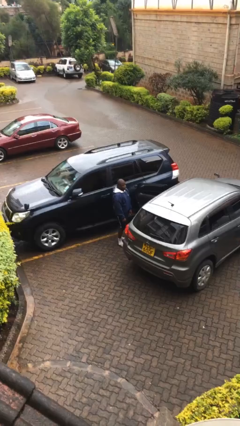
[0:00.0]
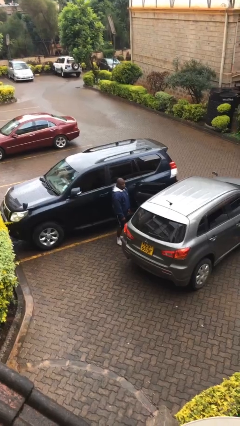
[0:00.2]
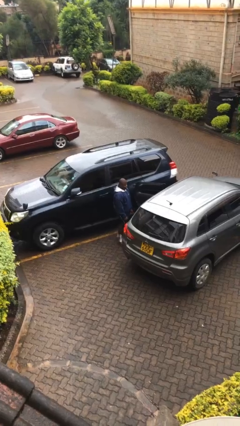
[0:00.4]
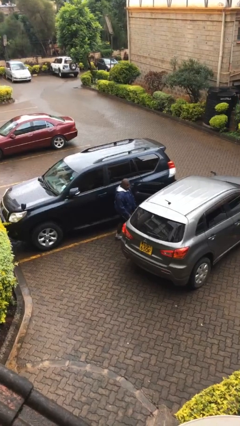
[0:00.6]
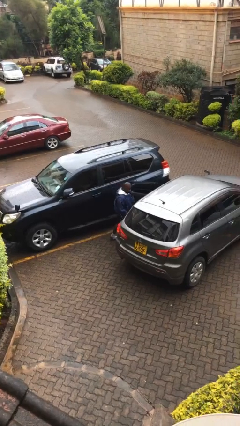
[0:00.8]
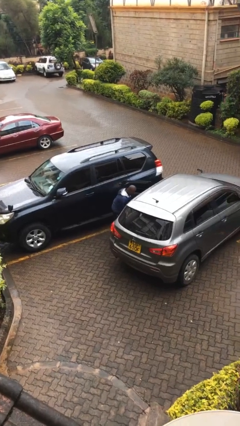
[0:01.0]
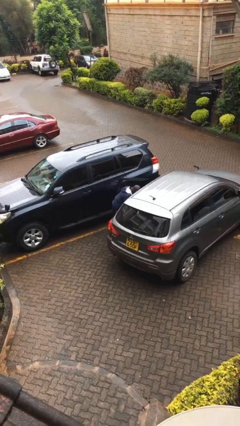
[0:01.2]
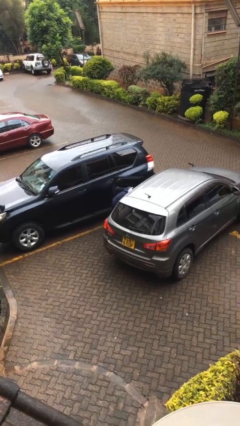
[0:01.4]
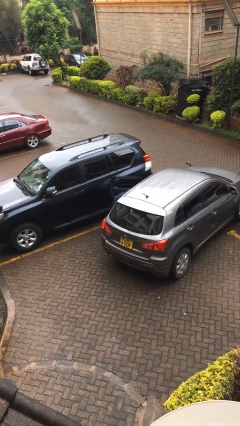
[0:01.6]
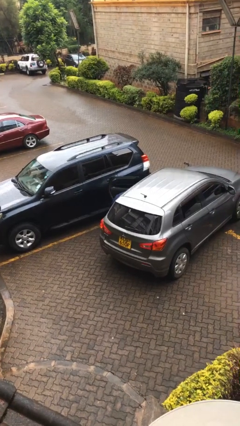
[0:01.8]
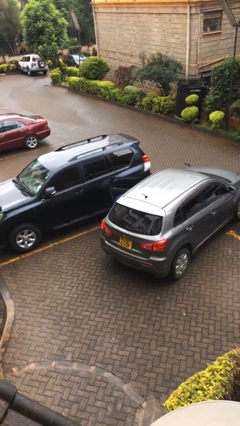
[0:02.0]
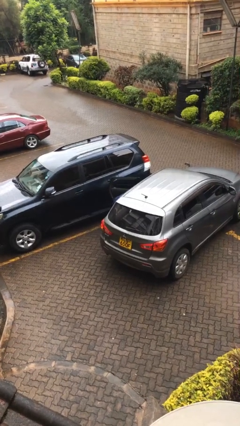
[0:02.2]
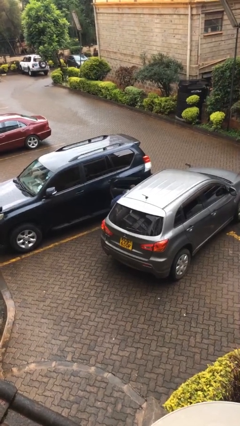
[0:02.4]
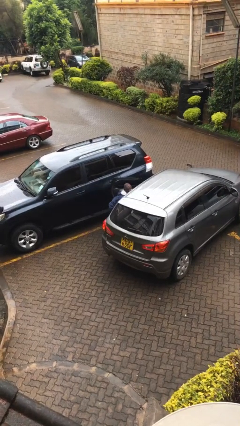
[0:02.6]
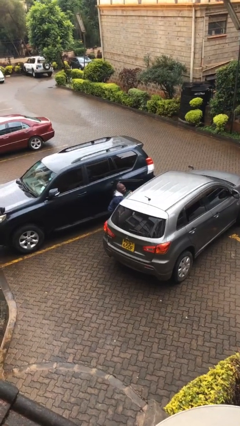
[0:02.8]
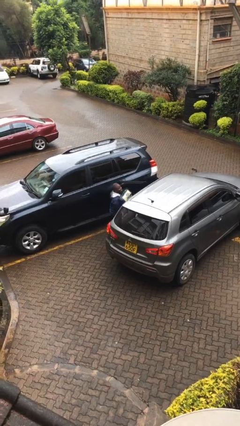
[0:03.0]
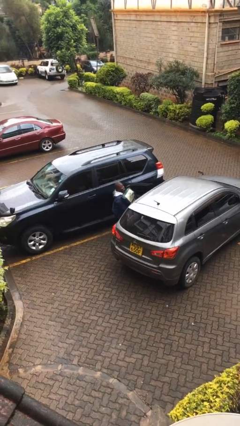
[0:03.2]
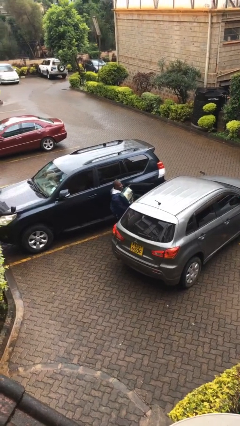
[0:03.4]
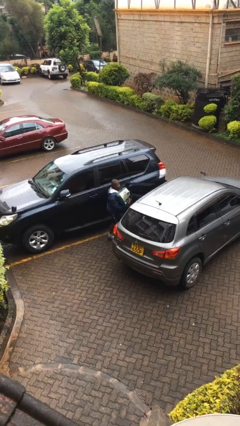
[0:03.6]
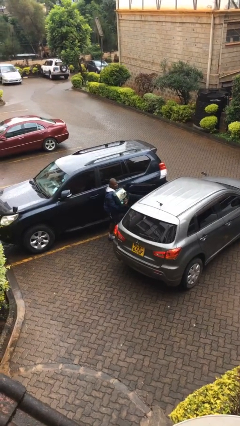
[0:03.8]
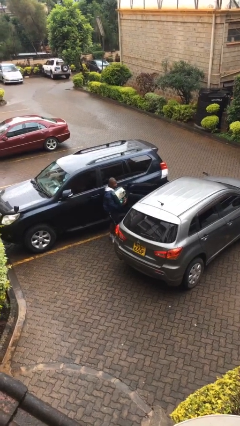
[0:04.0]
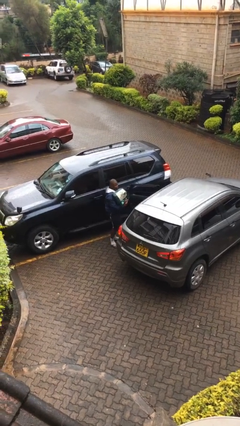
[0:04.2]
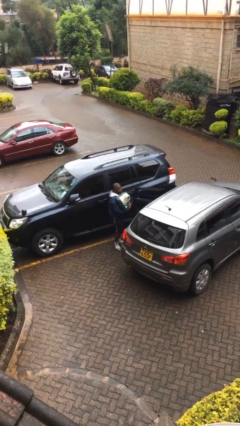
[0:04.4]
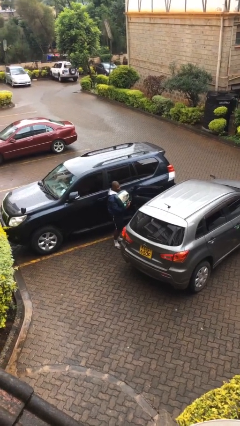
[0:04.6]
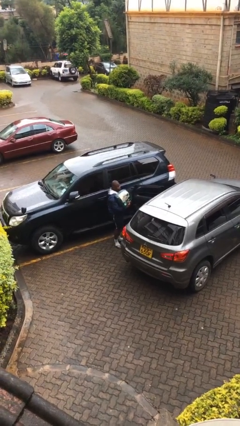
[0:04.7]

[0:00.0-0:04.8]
person unloads car

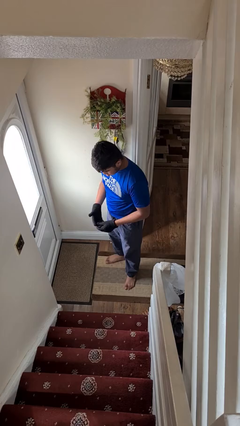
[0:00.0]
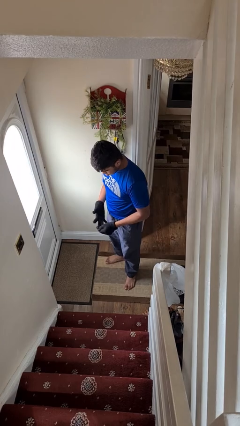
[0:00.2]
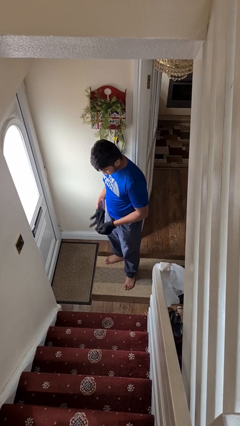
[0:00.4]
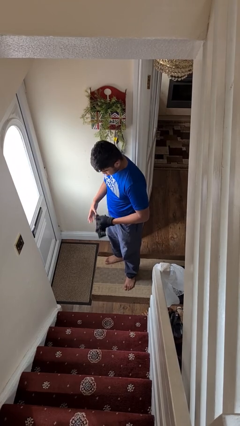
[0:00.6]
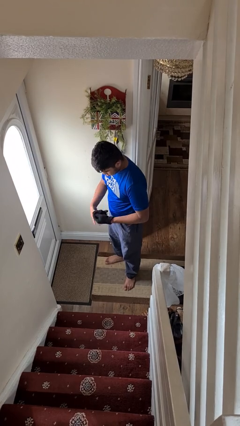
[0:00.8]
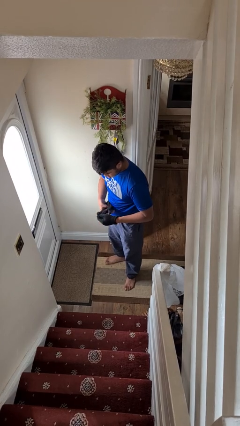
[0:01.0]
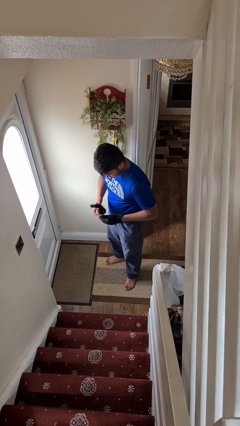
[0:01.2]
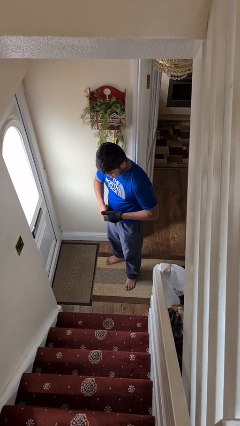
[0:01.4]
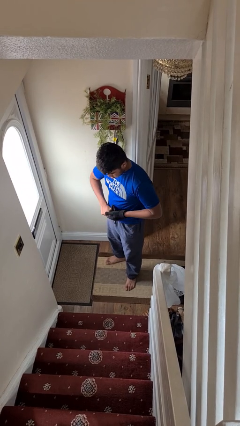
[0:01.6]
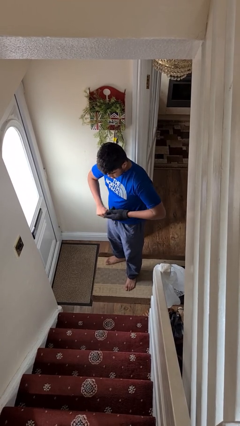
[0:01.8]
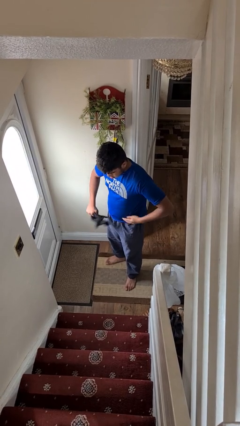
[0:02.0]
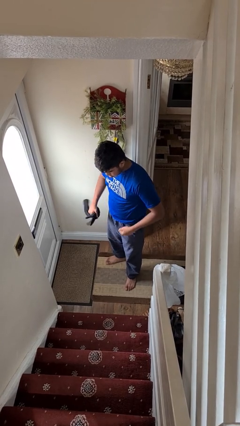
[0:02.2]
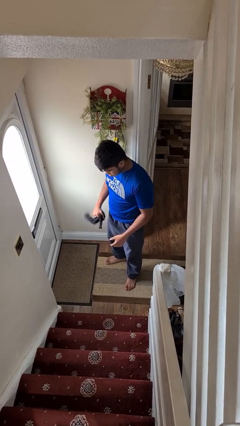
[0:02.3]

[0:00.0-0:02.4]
person takes off gloves

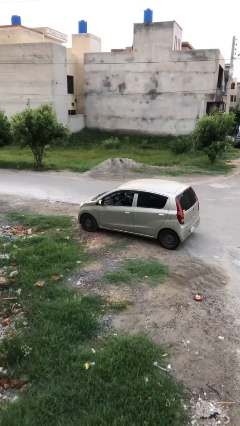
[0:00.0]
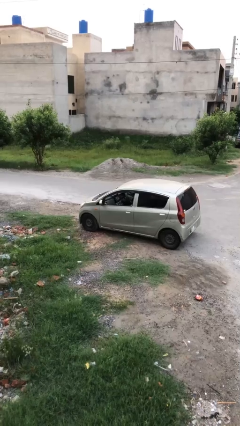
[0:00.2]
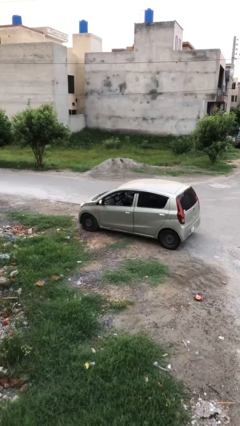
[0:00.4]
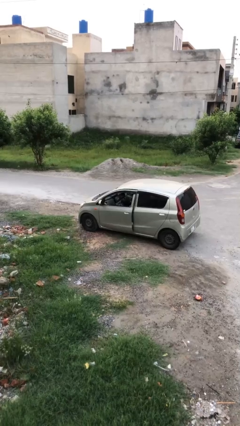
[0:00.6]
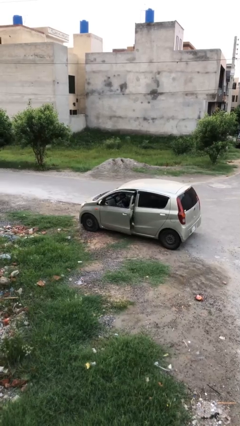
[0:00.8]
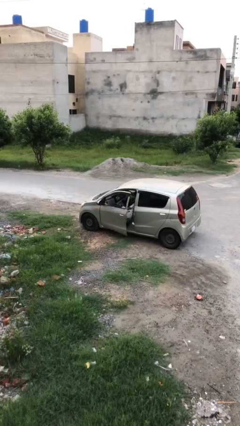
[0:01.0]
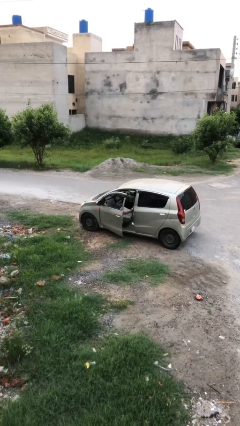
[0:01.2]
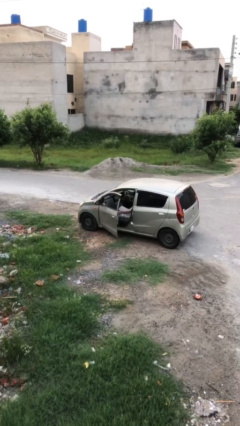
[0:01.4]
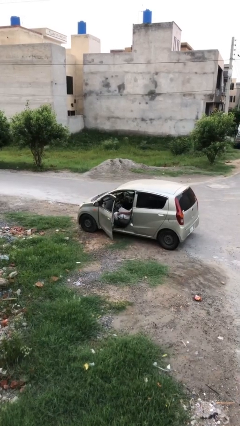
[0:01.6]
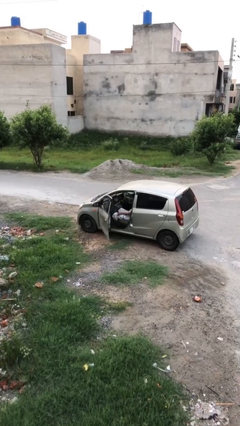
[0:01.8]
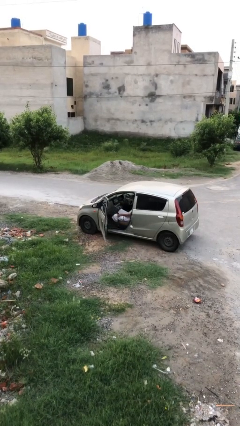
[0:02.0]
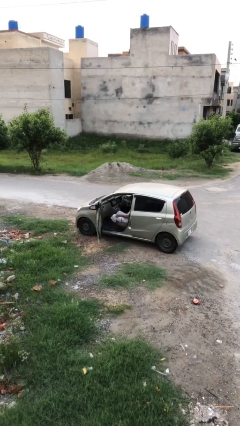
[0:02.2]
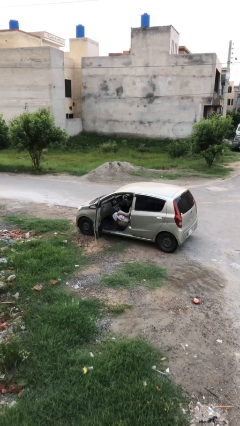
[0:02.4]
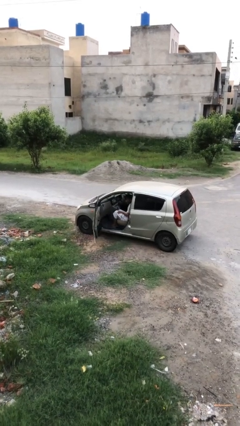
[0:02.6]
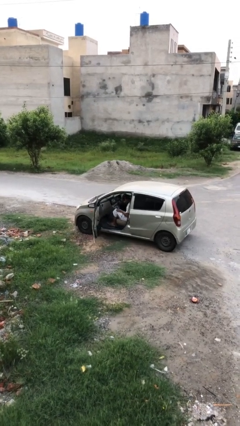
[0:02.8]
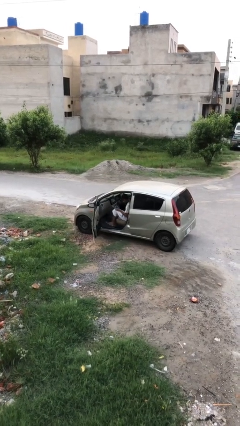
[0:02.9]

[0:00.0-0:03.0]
person opens car door

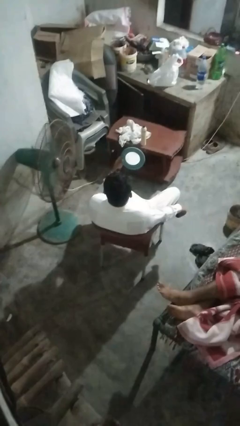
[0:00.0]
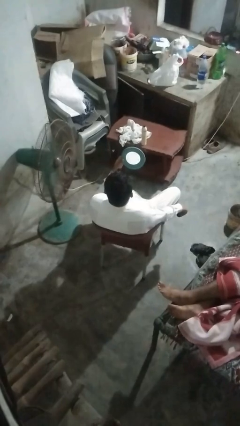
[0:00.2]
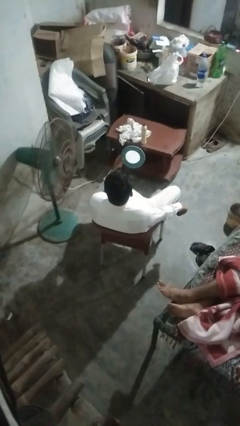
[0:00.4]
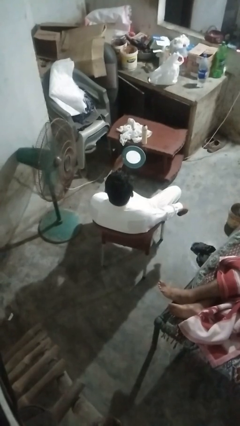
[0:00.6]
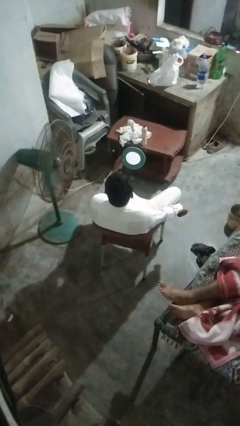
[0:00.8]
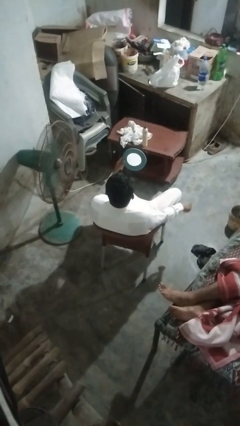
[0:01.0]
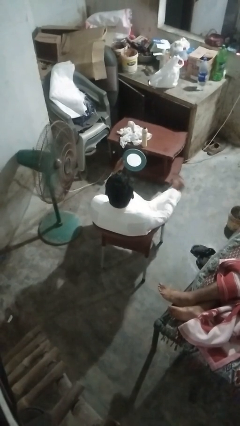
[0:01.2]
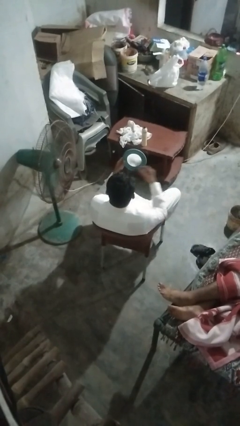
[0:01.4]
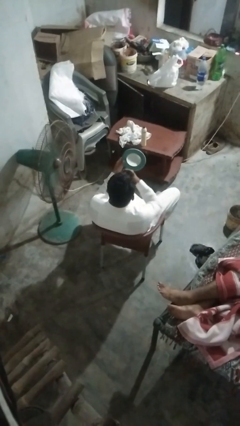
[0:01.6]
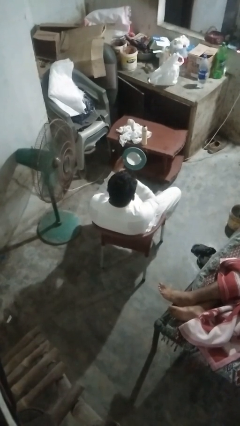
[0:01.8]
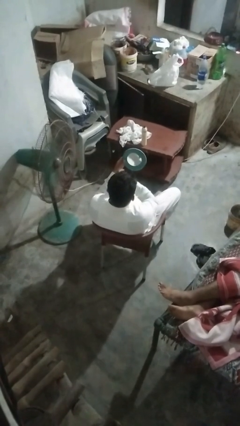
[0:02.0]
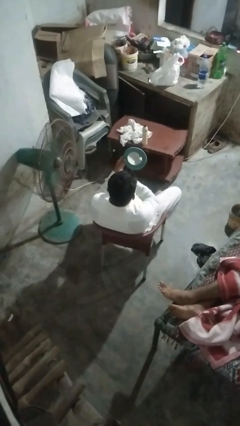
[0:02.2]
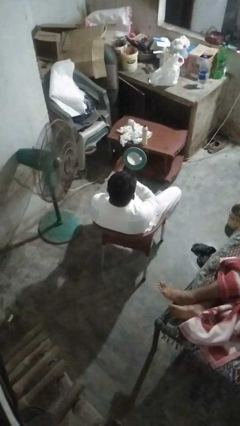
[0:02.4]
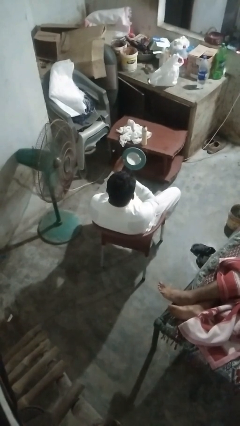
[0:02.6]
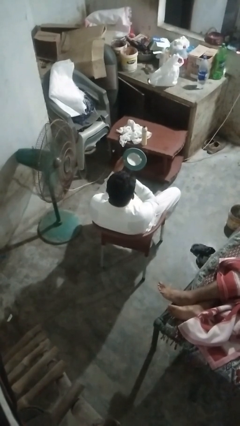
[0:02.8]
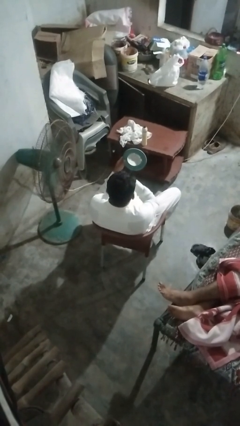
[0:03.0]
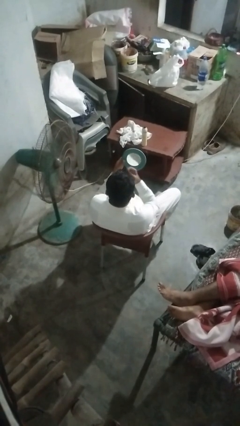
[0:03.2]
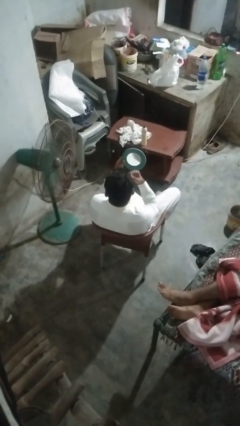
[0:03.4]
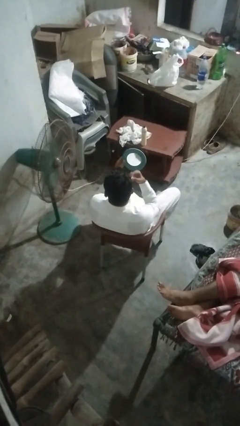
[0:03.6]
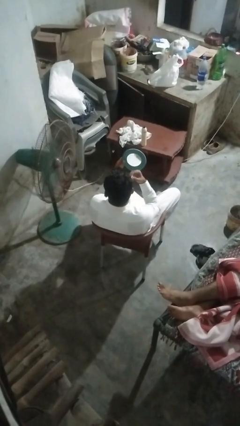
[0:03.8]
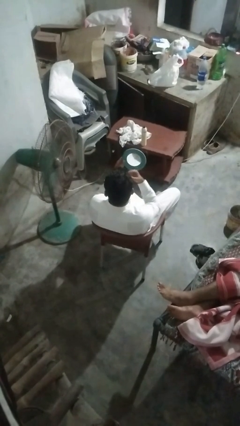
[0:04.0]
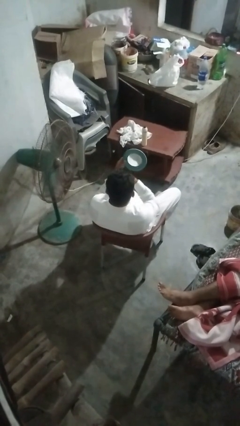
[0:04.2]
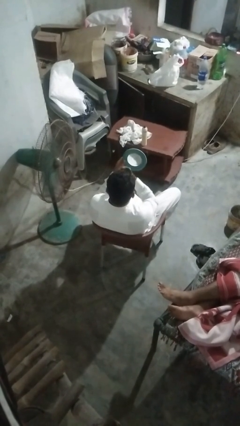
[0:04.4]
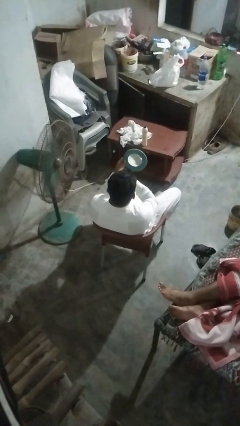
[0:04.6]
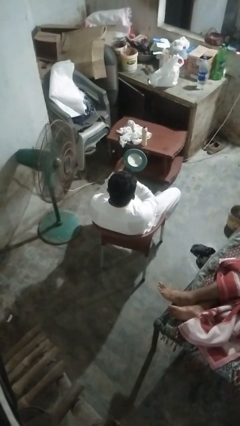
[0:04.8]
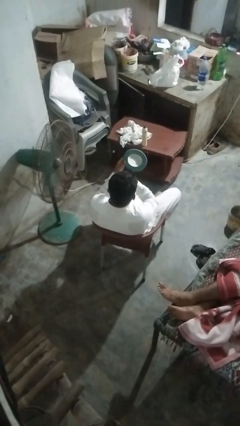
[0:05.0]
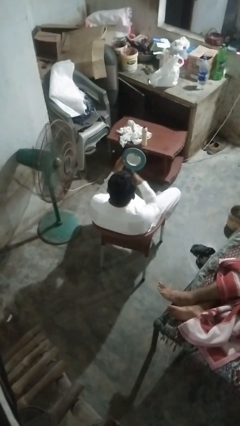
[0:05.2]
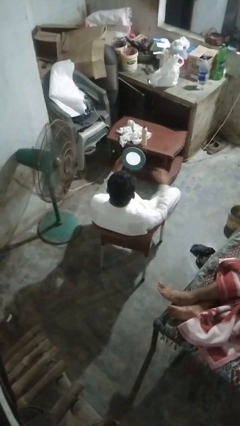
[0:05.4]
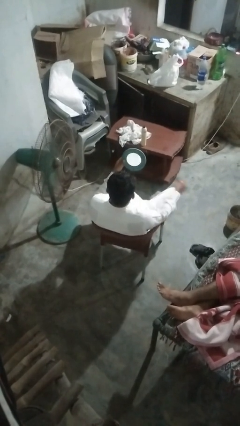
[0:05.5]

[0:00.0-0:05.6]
person applies eye makeup

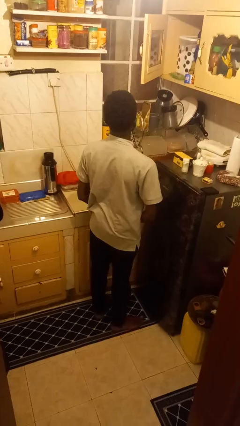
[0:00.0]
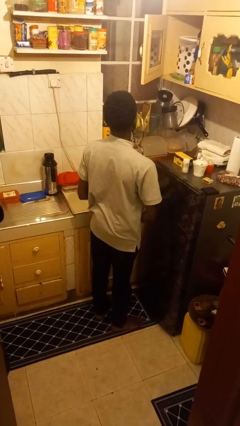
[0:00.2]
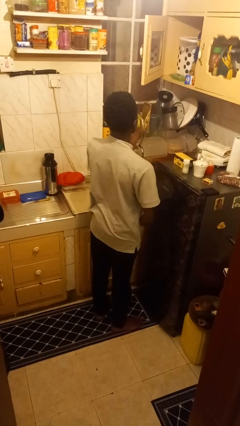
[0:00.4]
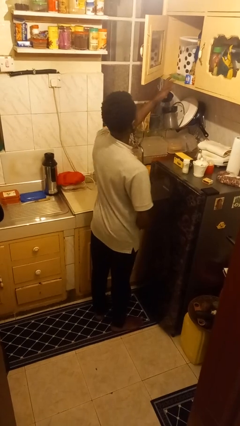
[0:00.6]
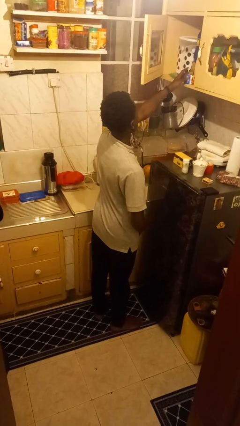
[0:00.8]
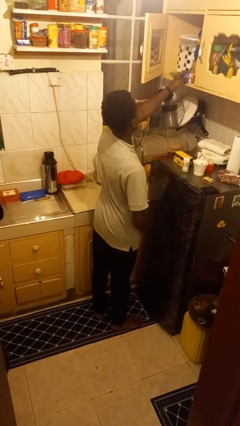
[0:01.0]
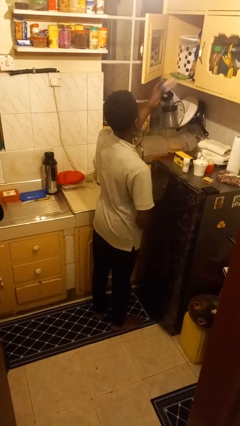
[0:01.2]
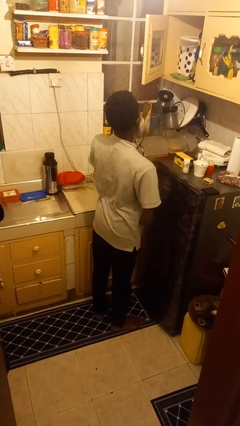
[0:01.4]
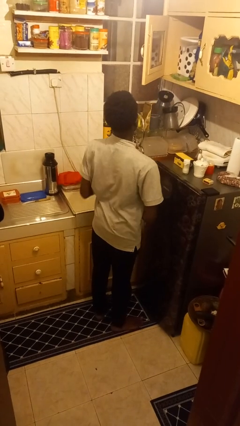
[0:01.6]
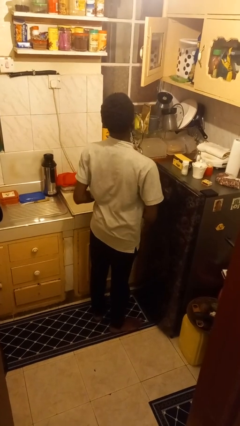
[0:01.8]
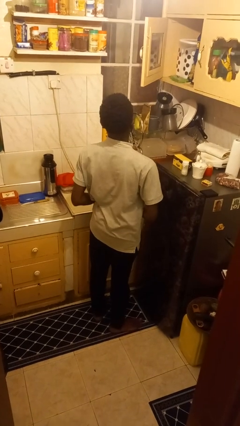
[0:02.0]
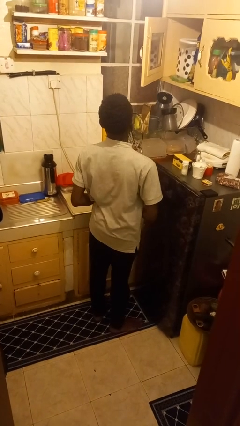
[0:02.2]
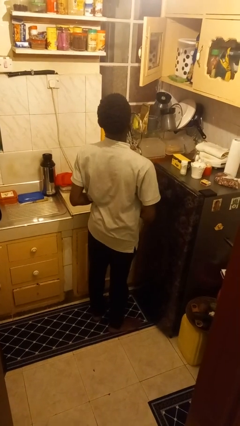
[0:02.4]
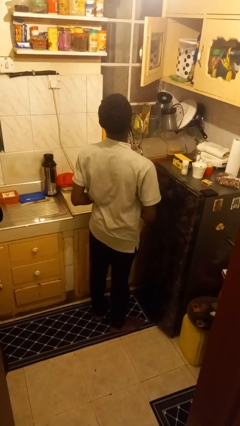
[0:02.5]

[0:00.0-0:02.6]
person picks up object from cabinet
